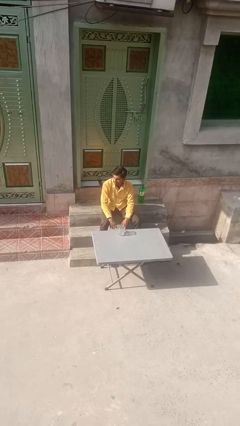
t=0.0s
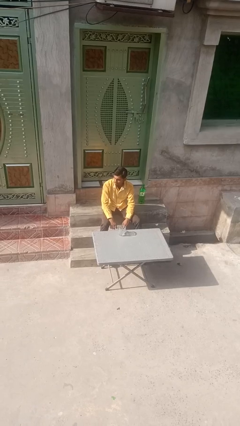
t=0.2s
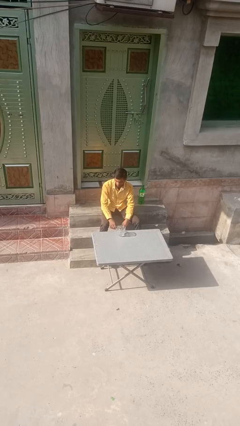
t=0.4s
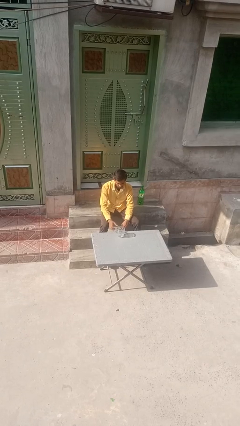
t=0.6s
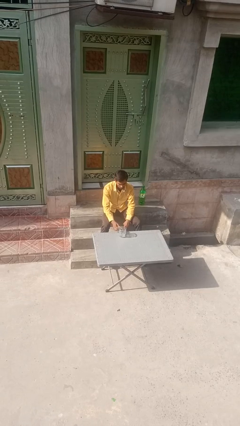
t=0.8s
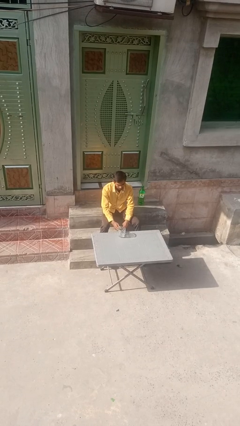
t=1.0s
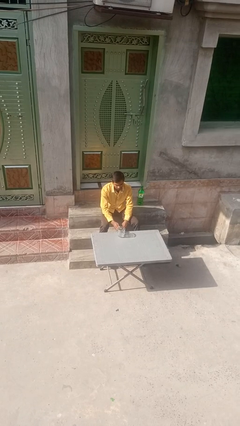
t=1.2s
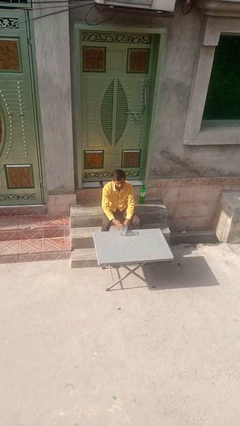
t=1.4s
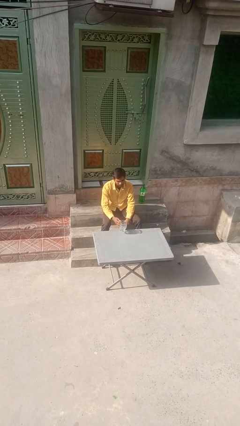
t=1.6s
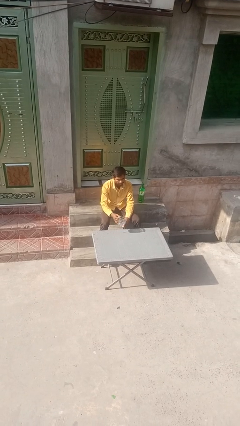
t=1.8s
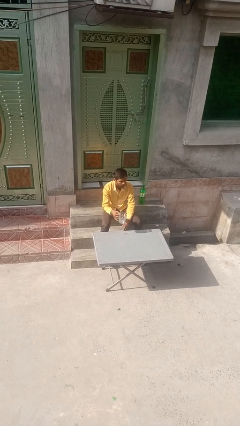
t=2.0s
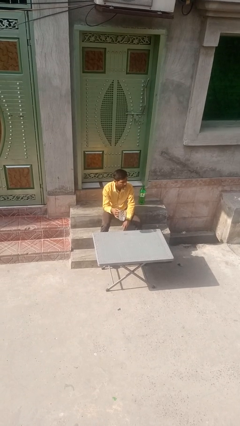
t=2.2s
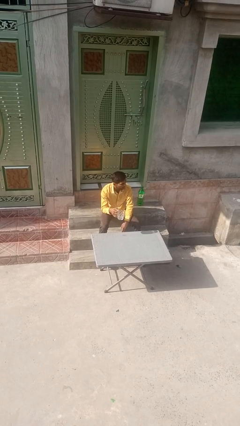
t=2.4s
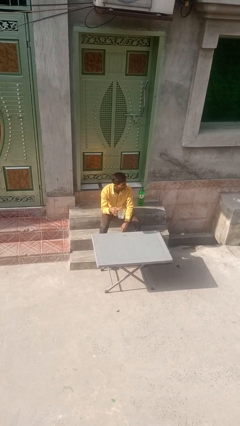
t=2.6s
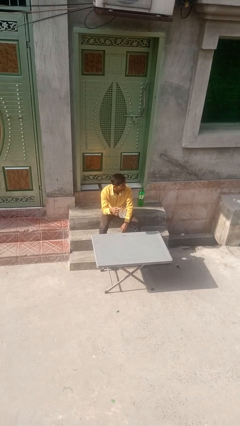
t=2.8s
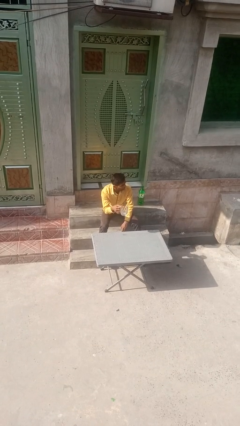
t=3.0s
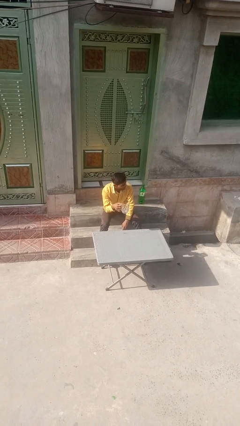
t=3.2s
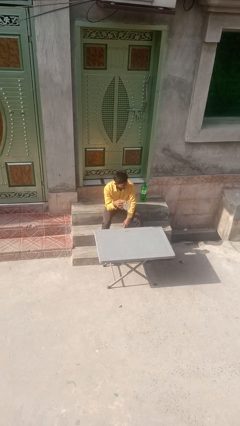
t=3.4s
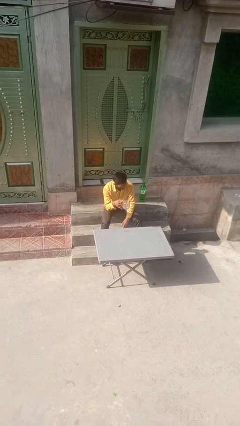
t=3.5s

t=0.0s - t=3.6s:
person picks up object from table

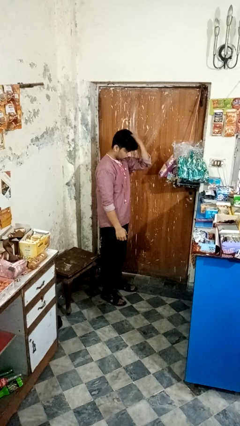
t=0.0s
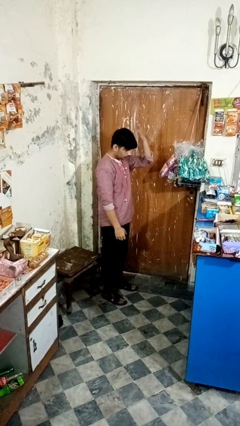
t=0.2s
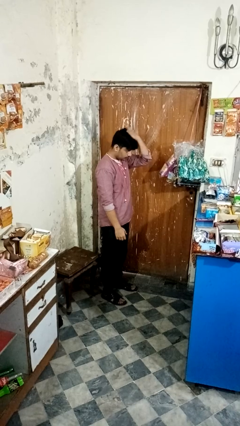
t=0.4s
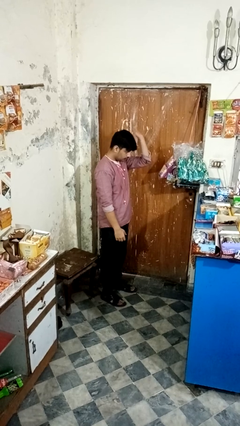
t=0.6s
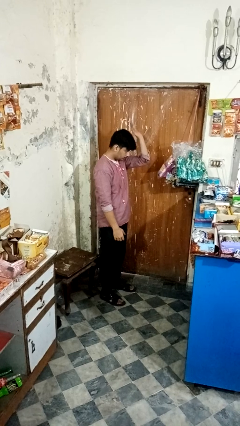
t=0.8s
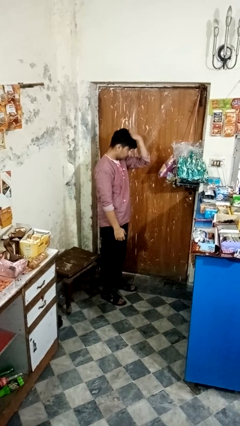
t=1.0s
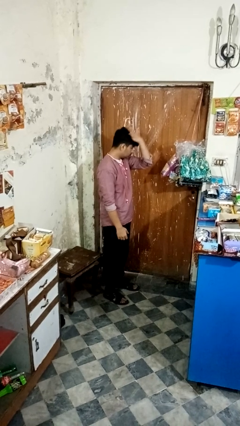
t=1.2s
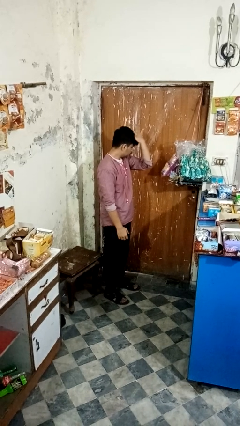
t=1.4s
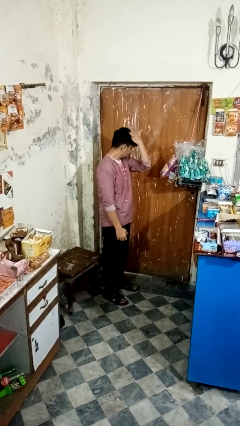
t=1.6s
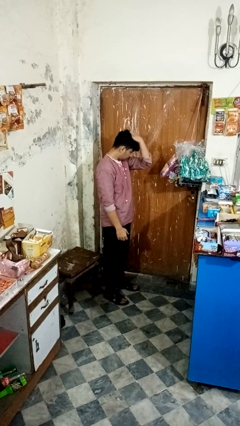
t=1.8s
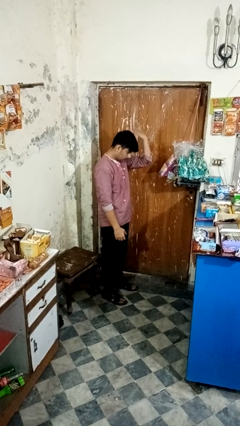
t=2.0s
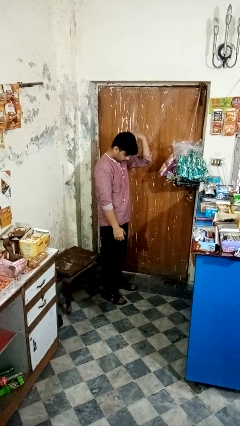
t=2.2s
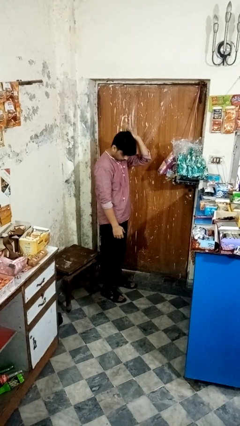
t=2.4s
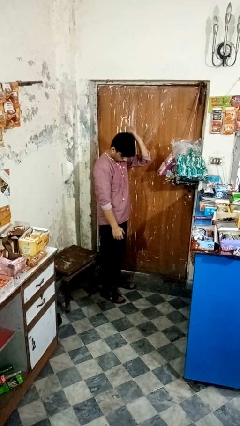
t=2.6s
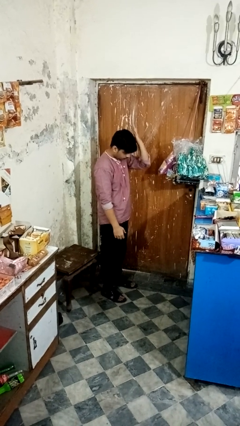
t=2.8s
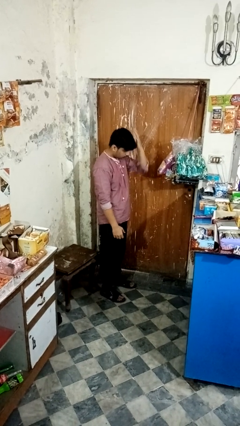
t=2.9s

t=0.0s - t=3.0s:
person pats head

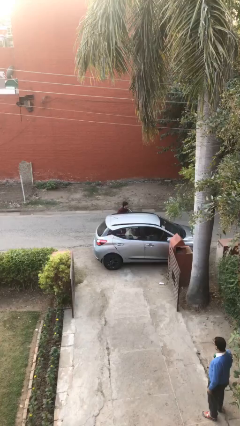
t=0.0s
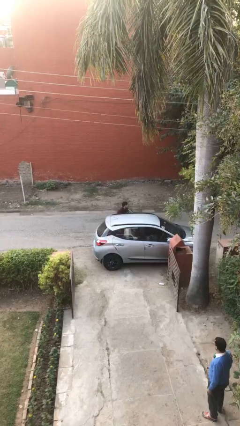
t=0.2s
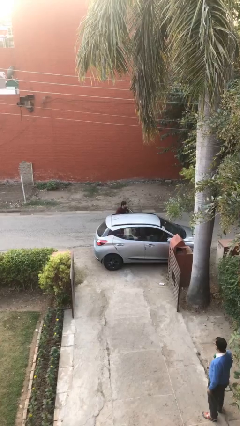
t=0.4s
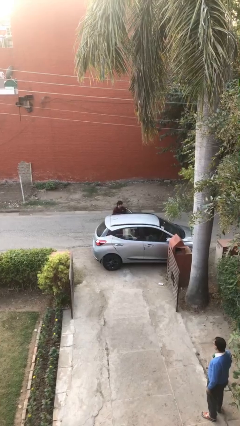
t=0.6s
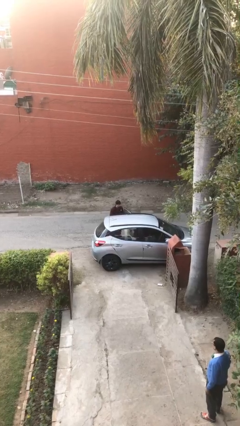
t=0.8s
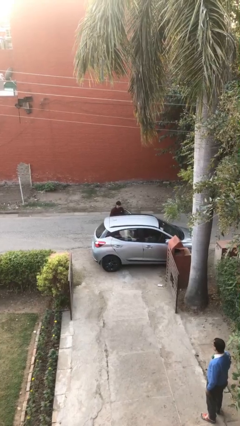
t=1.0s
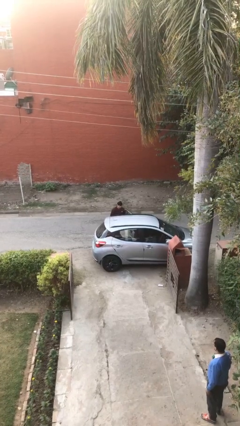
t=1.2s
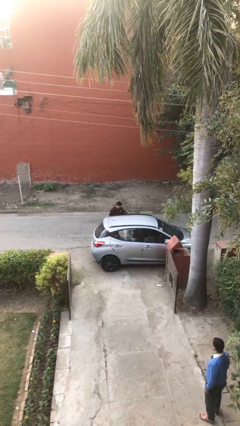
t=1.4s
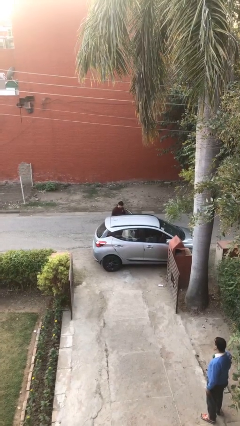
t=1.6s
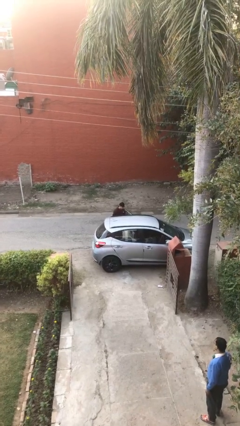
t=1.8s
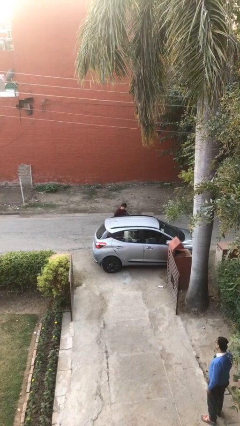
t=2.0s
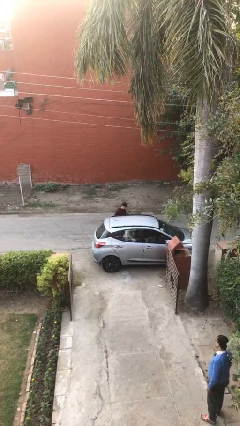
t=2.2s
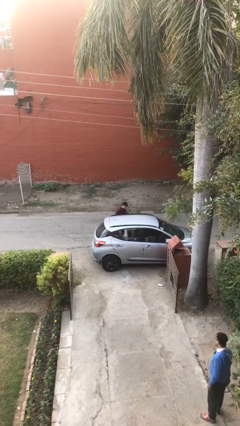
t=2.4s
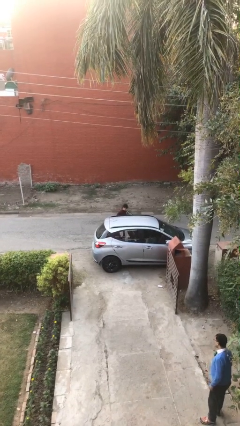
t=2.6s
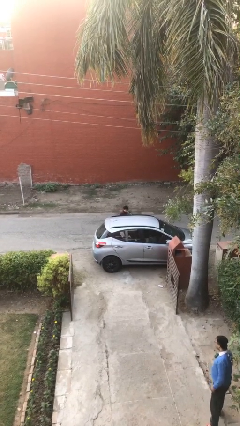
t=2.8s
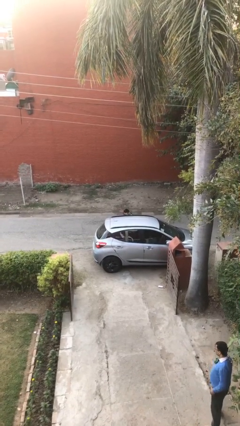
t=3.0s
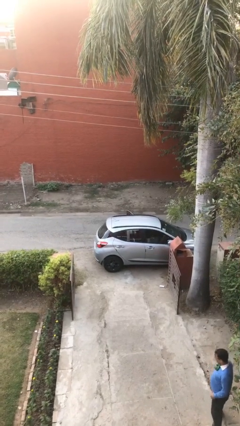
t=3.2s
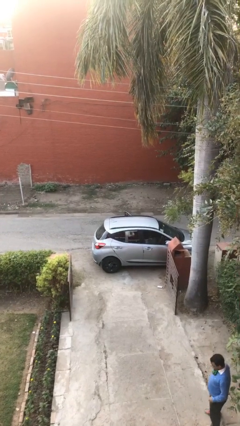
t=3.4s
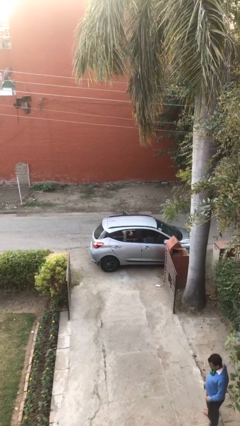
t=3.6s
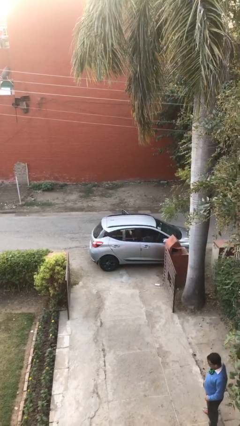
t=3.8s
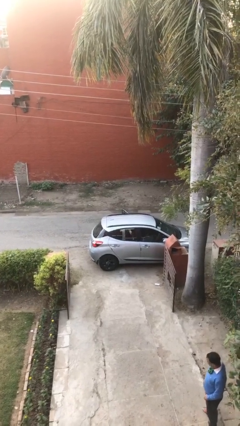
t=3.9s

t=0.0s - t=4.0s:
person enters car

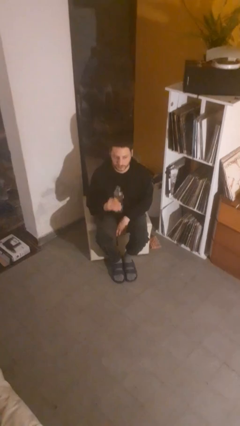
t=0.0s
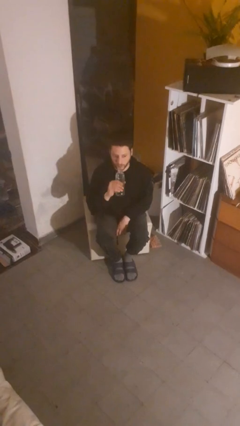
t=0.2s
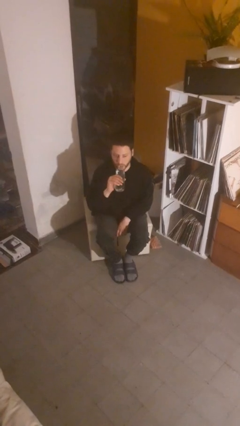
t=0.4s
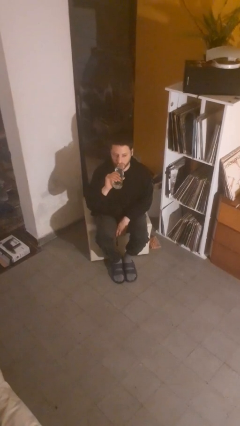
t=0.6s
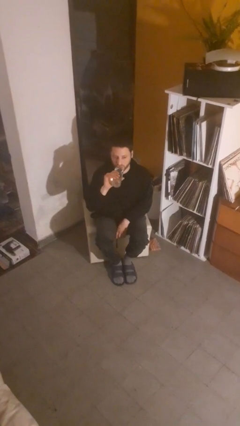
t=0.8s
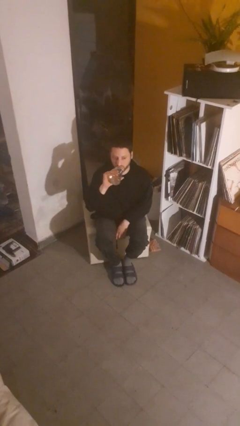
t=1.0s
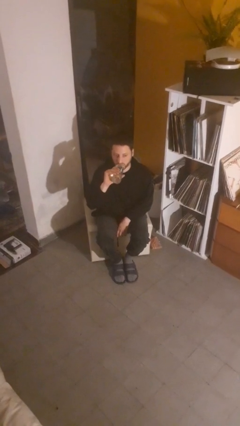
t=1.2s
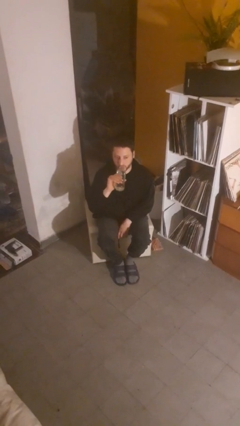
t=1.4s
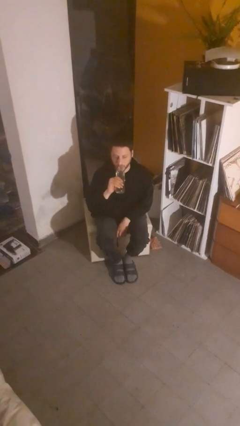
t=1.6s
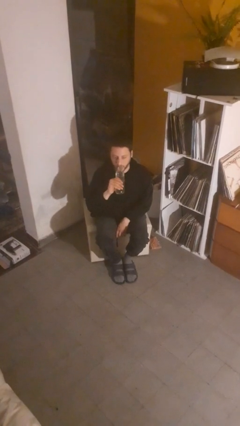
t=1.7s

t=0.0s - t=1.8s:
person drinks from bottle

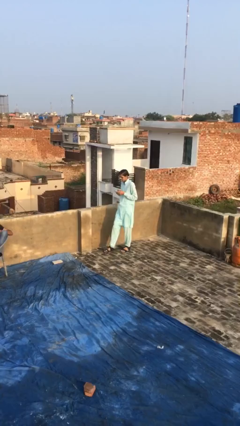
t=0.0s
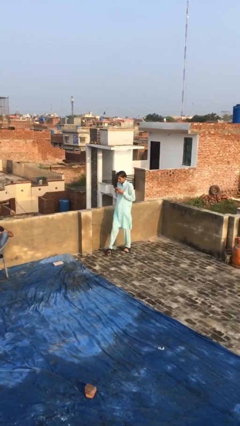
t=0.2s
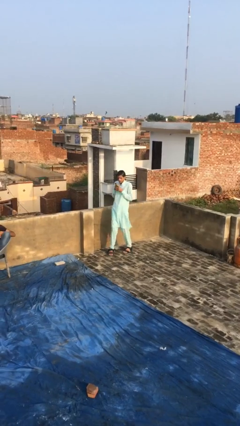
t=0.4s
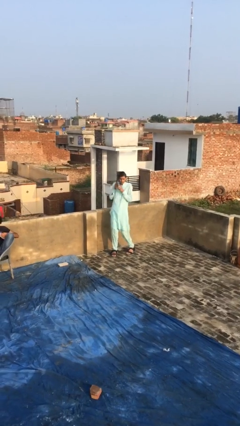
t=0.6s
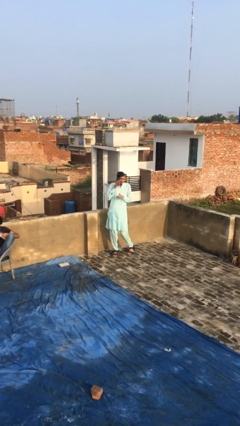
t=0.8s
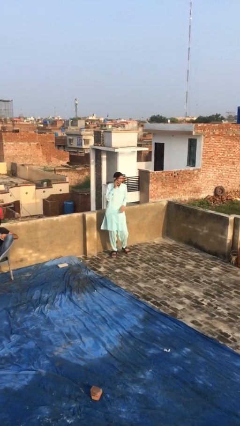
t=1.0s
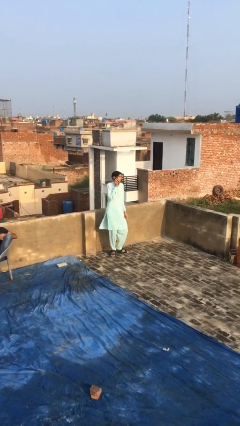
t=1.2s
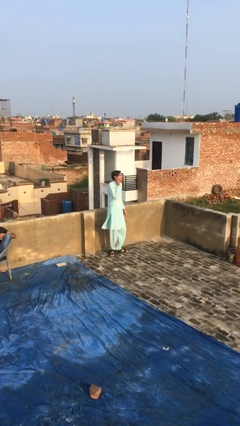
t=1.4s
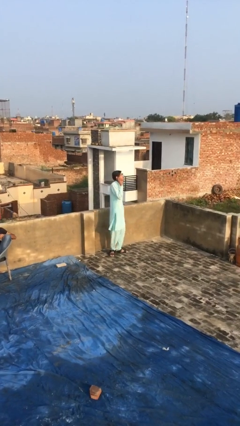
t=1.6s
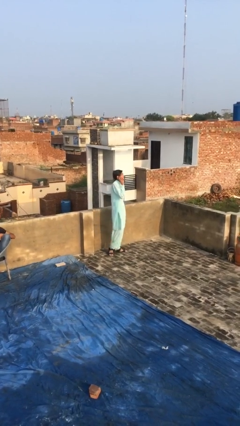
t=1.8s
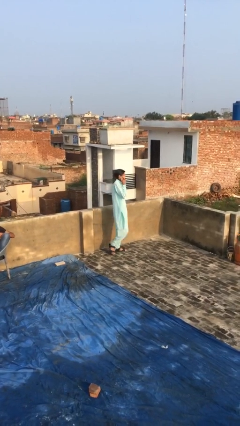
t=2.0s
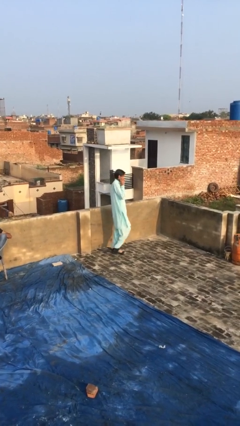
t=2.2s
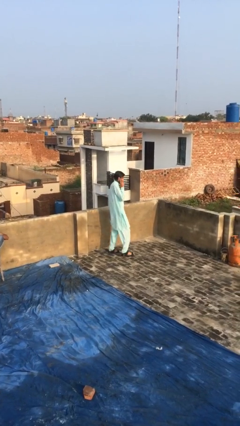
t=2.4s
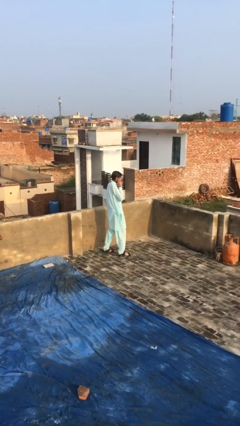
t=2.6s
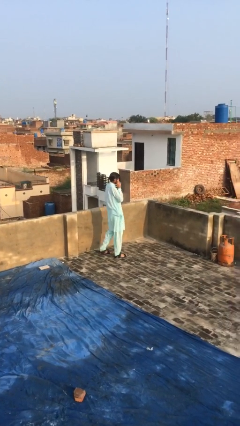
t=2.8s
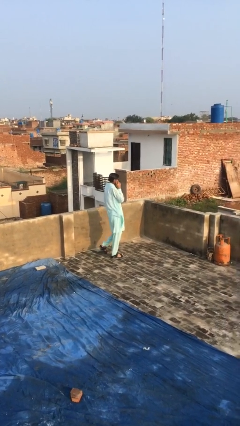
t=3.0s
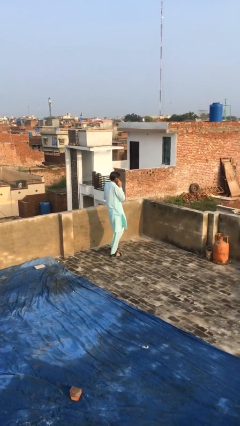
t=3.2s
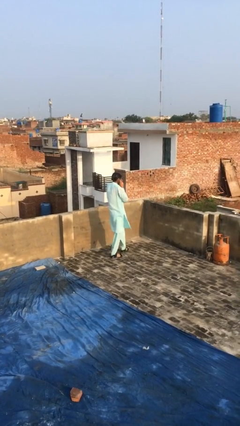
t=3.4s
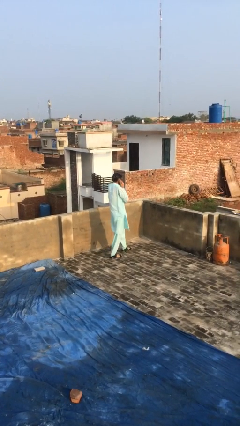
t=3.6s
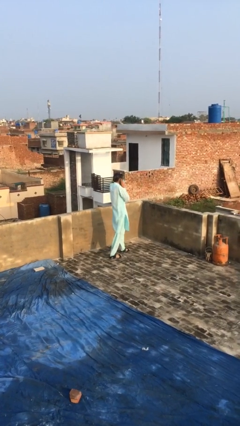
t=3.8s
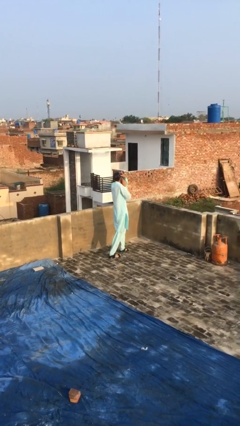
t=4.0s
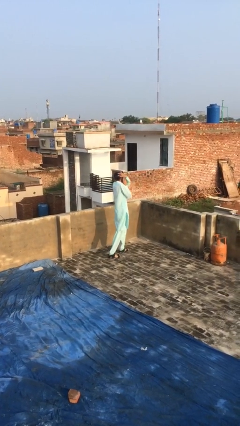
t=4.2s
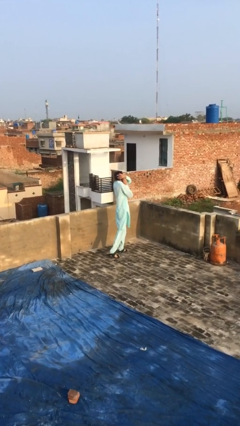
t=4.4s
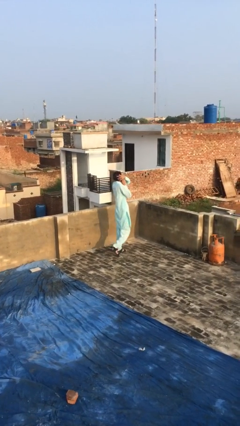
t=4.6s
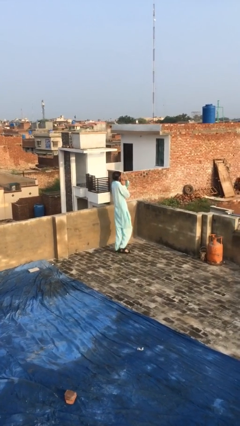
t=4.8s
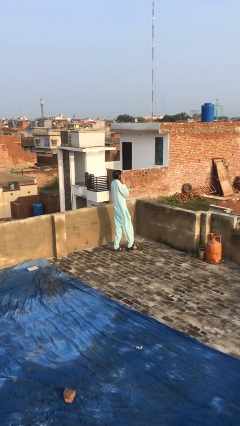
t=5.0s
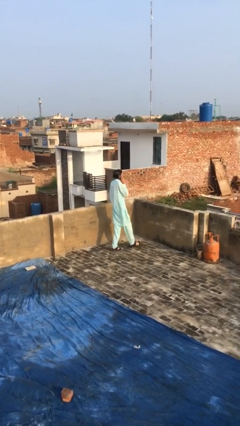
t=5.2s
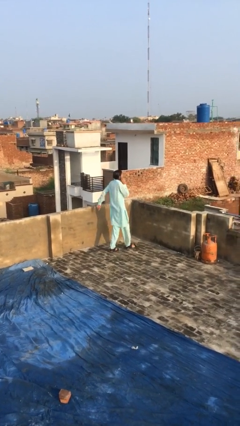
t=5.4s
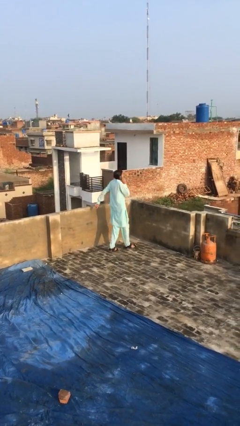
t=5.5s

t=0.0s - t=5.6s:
person talks on phone

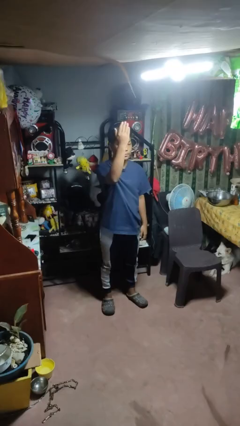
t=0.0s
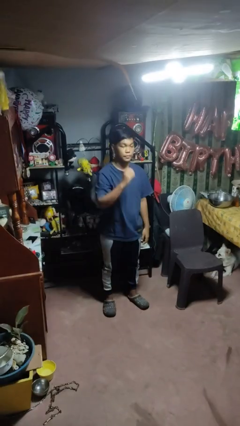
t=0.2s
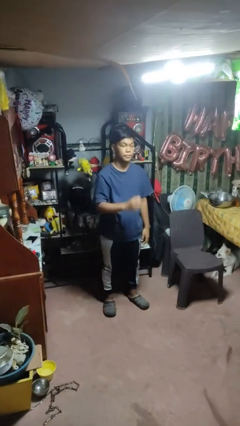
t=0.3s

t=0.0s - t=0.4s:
person gestures swipe up
